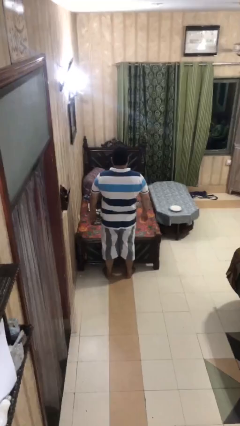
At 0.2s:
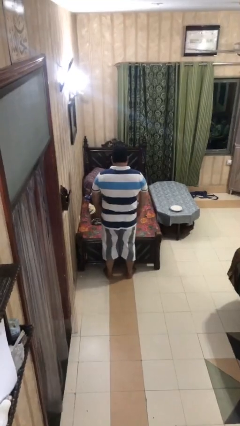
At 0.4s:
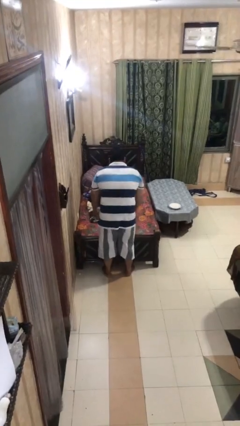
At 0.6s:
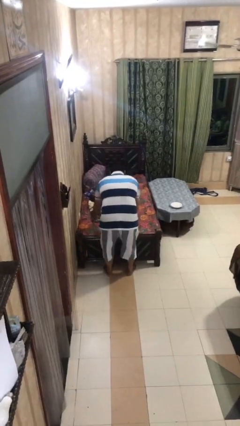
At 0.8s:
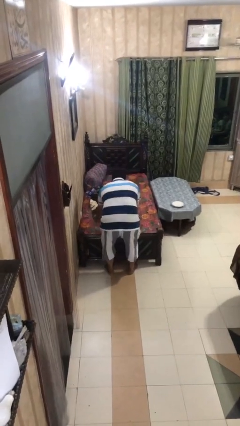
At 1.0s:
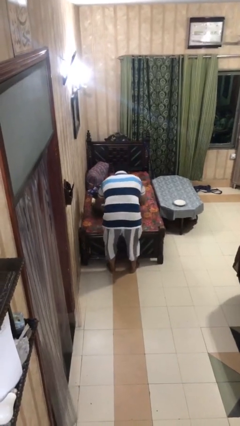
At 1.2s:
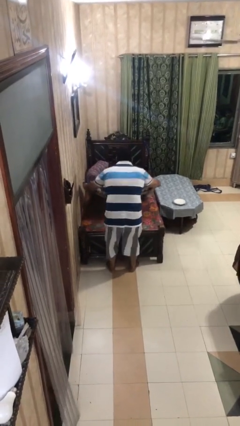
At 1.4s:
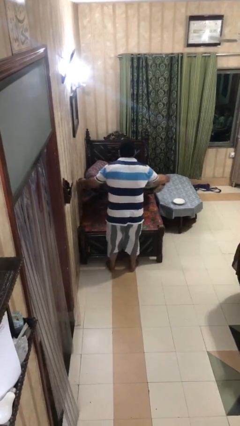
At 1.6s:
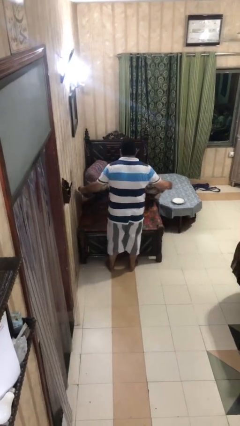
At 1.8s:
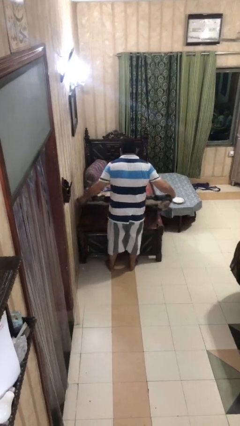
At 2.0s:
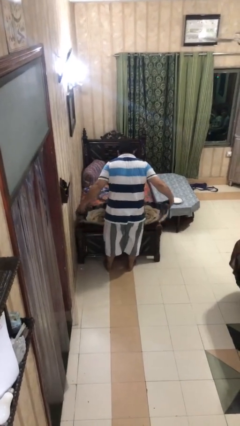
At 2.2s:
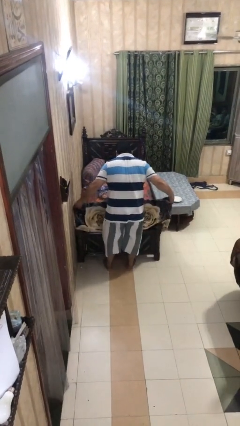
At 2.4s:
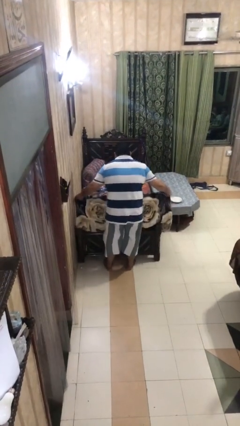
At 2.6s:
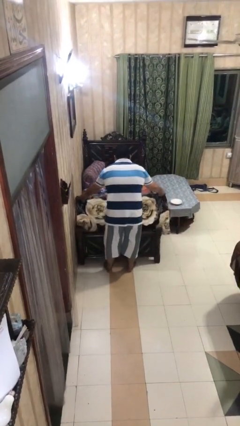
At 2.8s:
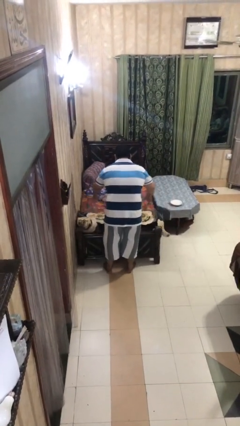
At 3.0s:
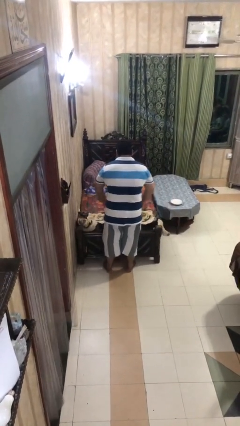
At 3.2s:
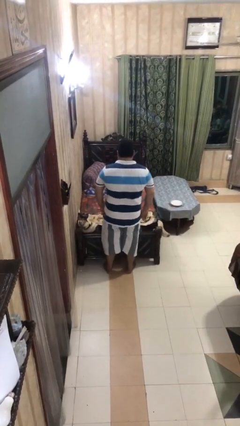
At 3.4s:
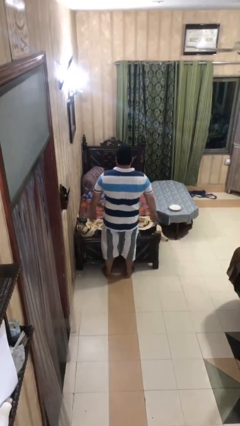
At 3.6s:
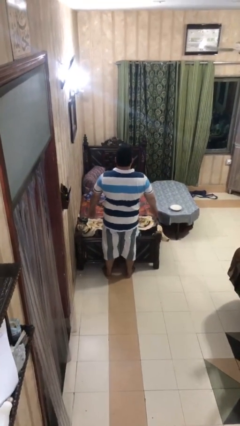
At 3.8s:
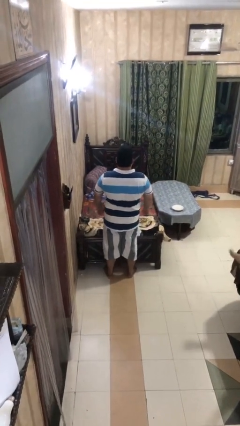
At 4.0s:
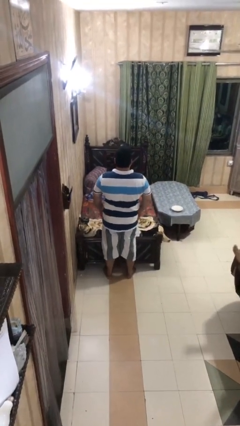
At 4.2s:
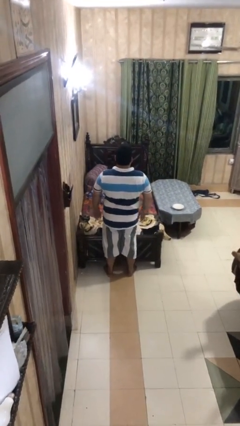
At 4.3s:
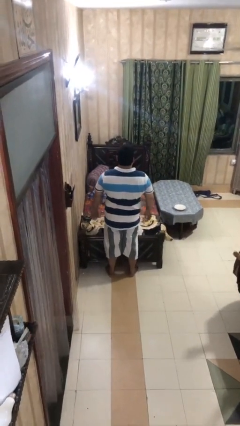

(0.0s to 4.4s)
person folds blanket

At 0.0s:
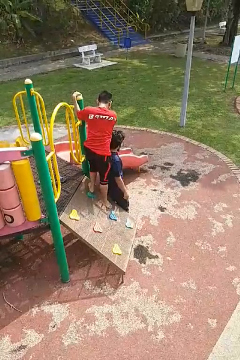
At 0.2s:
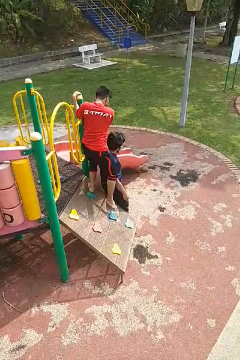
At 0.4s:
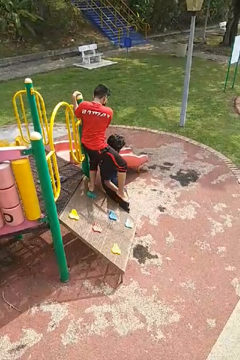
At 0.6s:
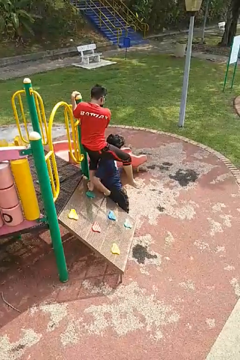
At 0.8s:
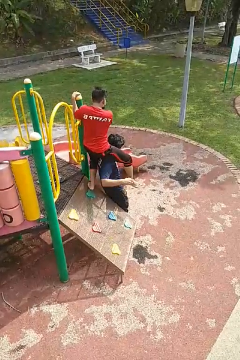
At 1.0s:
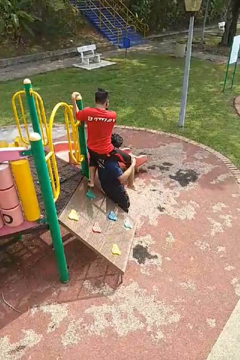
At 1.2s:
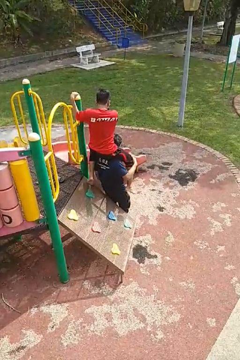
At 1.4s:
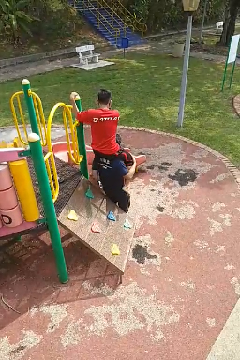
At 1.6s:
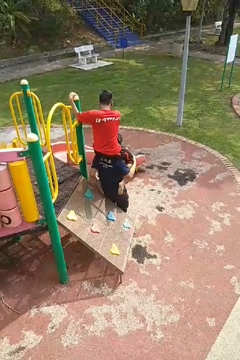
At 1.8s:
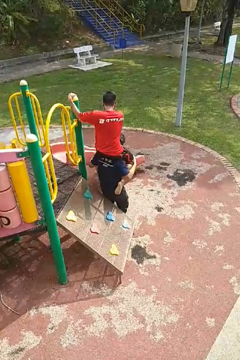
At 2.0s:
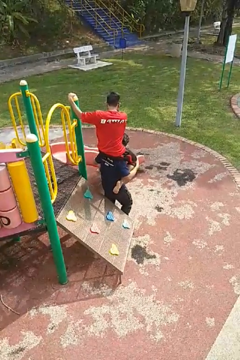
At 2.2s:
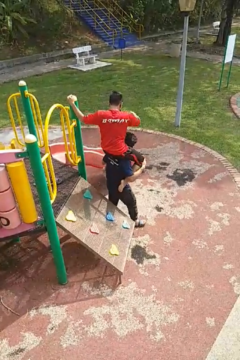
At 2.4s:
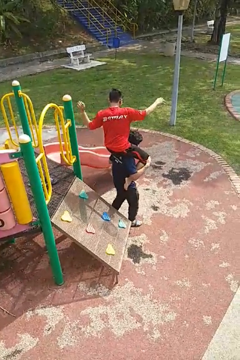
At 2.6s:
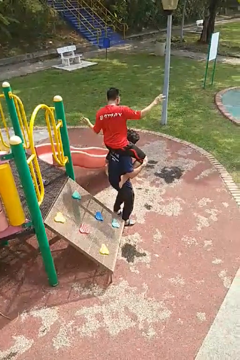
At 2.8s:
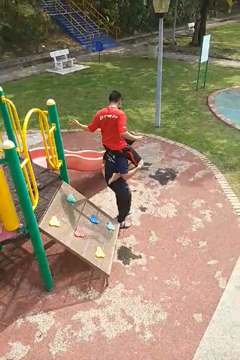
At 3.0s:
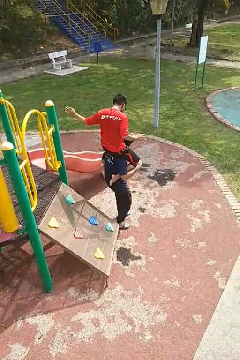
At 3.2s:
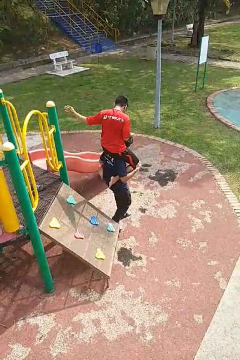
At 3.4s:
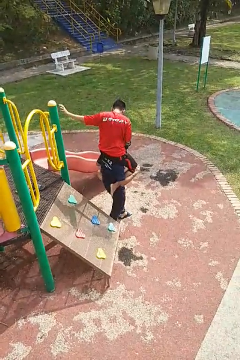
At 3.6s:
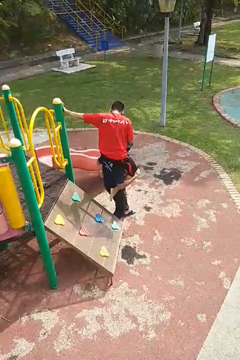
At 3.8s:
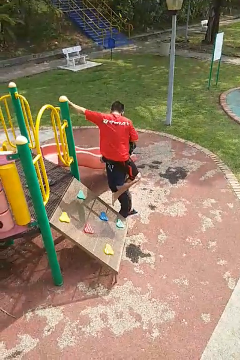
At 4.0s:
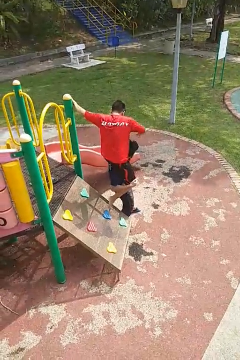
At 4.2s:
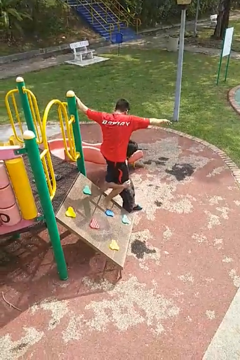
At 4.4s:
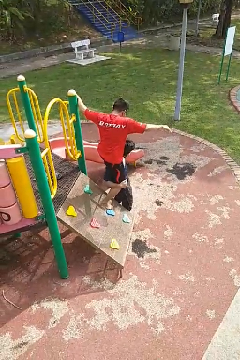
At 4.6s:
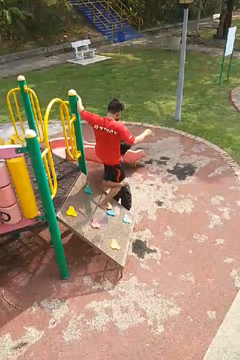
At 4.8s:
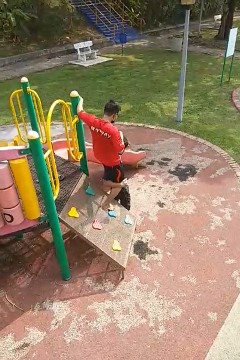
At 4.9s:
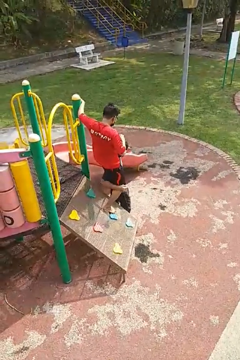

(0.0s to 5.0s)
person carries person on shoulders

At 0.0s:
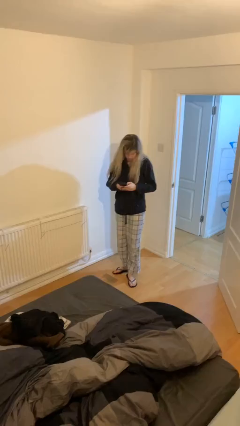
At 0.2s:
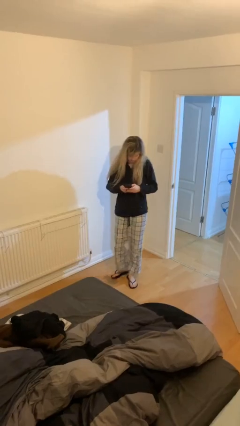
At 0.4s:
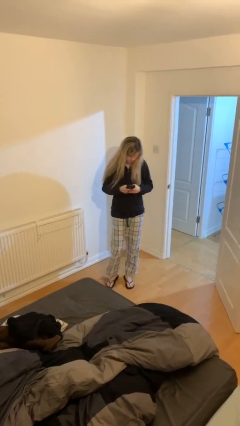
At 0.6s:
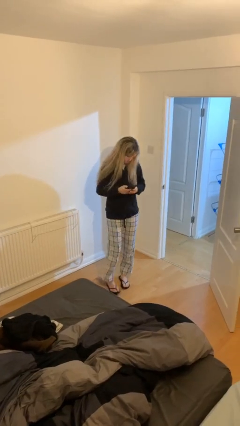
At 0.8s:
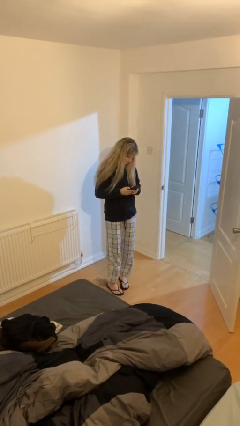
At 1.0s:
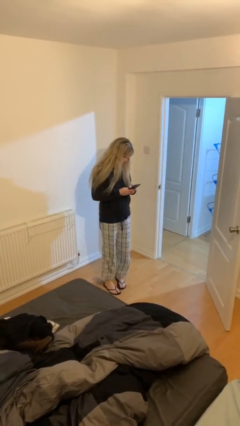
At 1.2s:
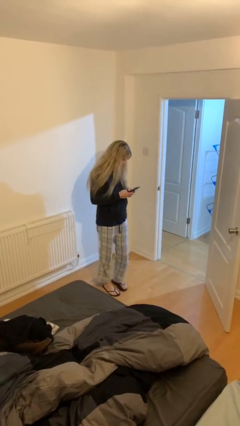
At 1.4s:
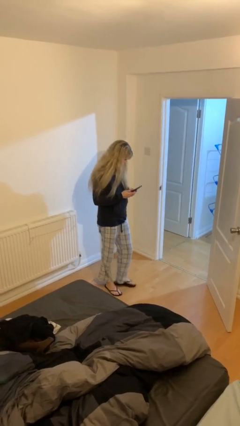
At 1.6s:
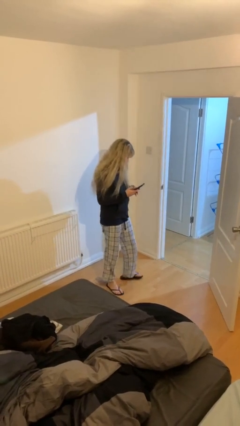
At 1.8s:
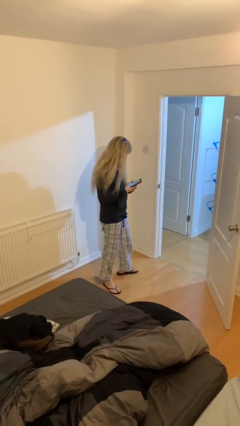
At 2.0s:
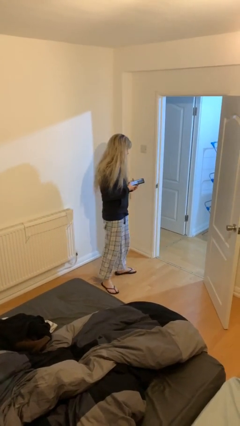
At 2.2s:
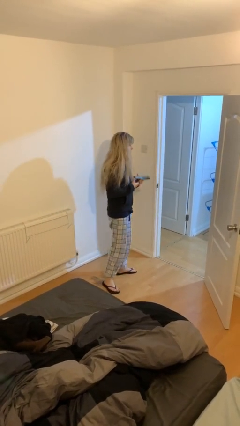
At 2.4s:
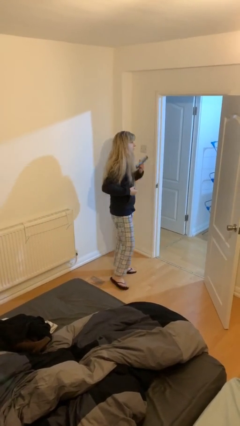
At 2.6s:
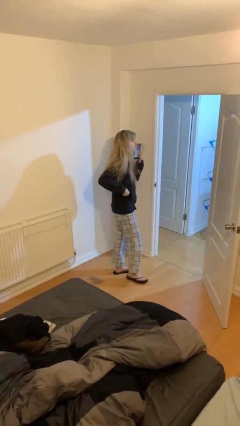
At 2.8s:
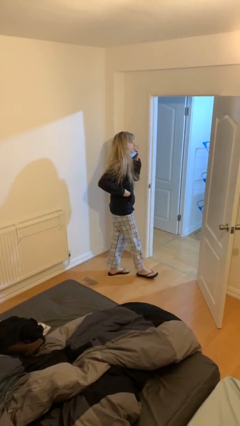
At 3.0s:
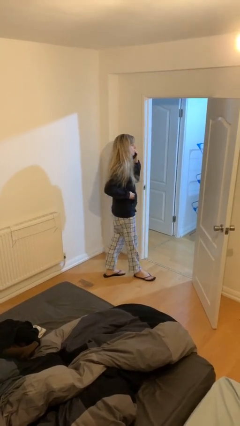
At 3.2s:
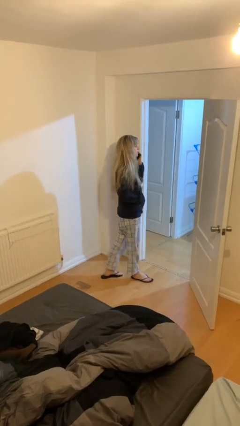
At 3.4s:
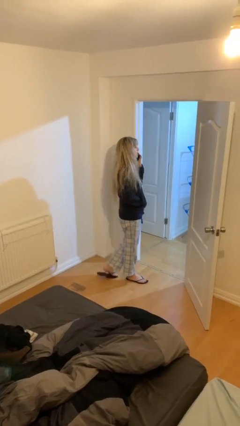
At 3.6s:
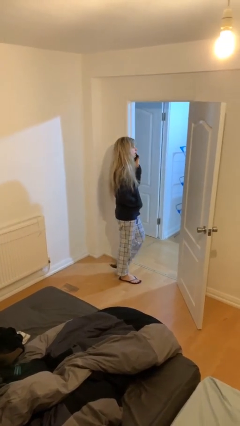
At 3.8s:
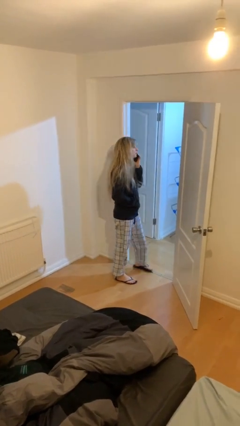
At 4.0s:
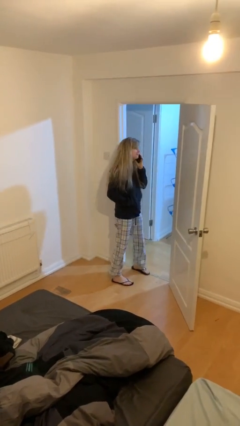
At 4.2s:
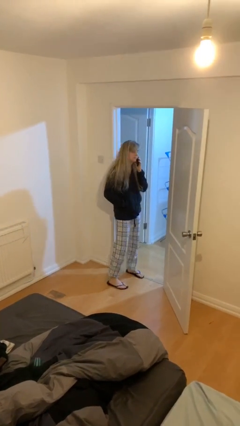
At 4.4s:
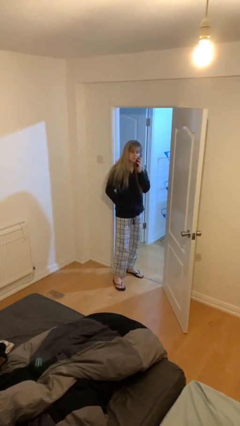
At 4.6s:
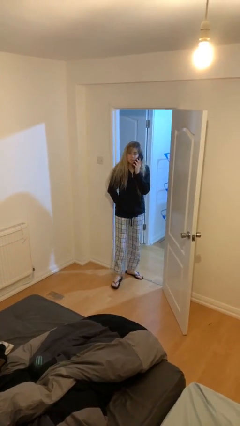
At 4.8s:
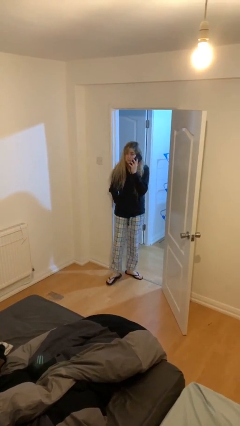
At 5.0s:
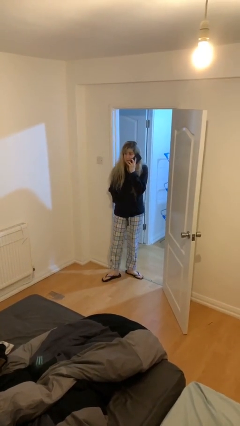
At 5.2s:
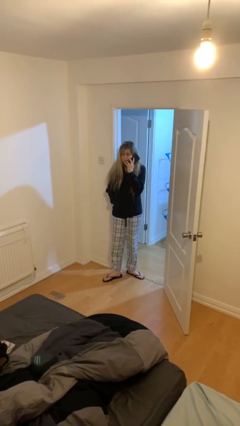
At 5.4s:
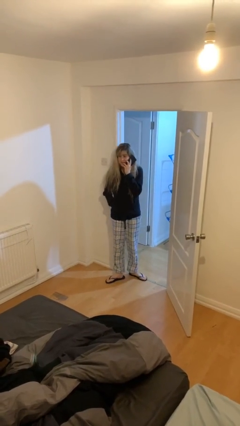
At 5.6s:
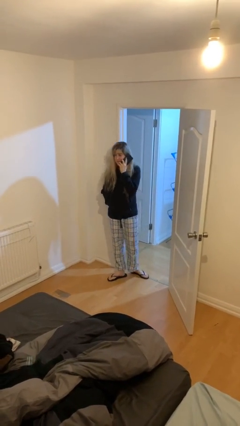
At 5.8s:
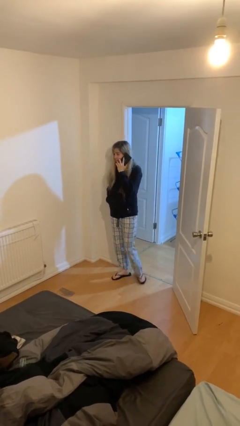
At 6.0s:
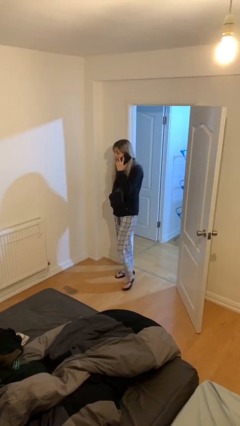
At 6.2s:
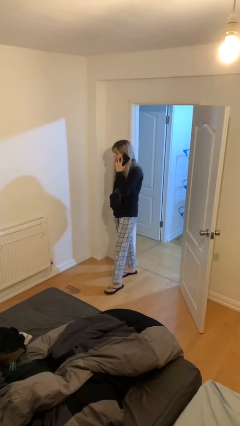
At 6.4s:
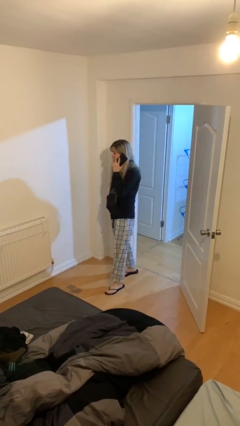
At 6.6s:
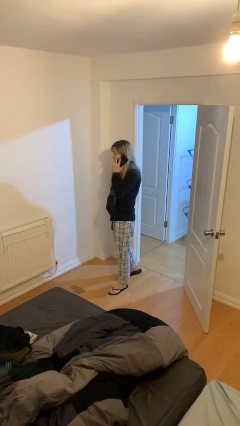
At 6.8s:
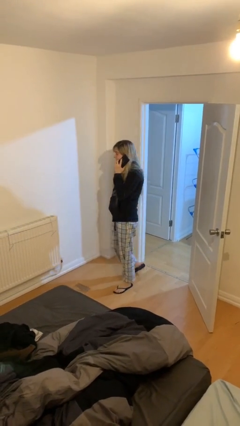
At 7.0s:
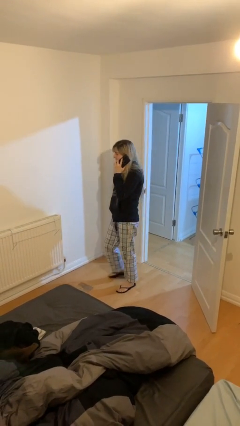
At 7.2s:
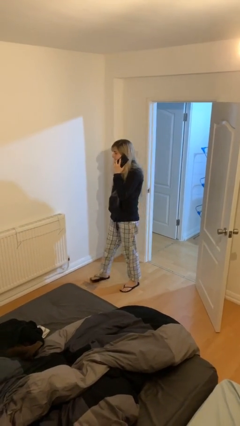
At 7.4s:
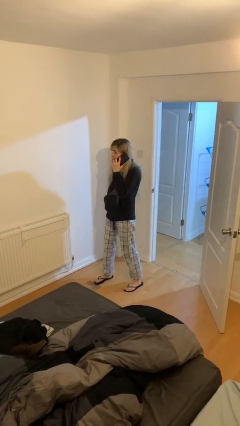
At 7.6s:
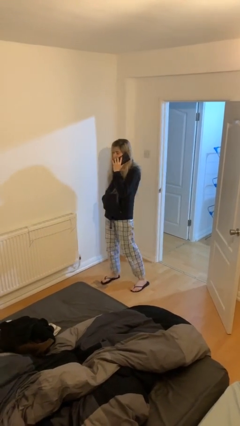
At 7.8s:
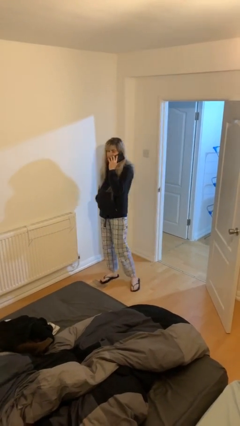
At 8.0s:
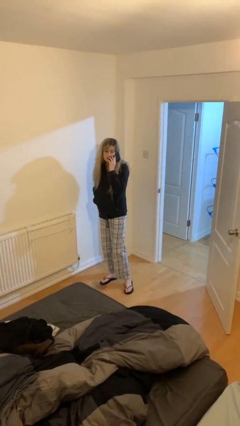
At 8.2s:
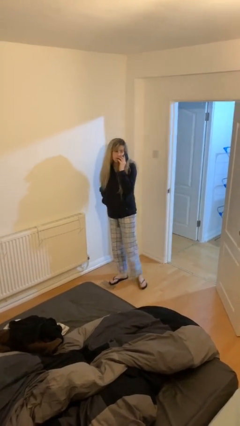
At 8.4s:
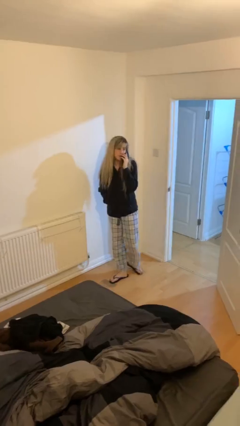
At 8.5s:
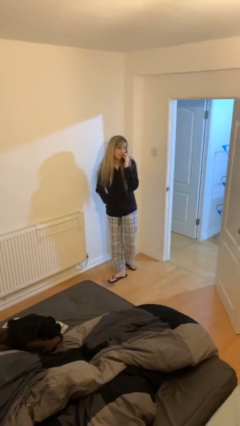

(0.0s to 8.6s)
person talks on phone

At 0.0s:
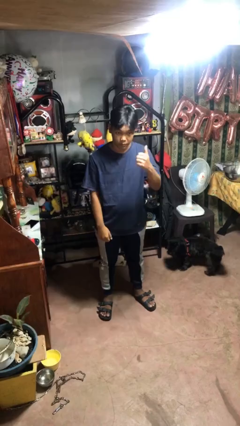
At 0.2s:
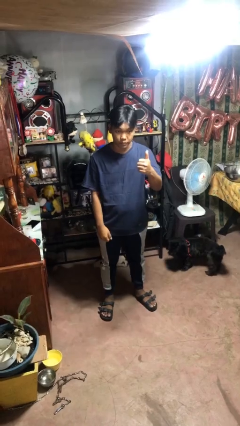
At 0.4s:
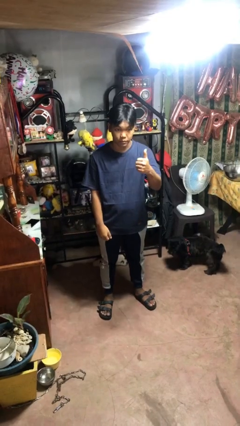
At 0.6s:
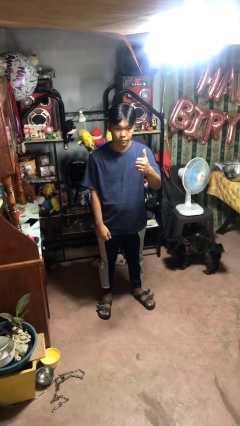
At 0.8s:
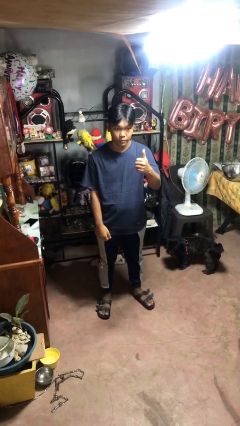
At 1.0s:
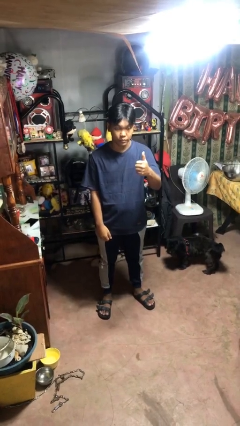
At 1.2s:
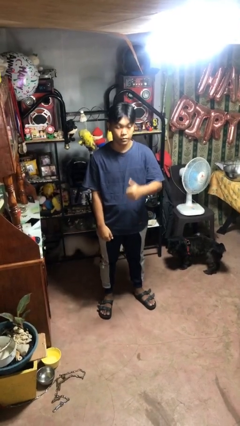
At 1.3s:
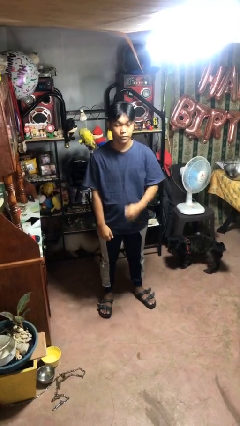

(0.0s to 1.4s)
person gestures thumbs up
